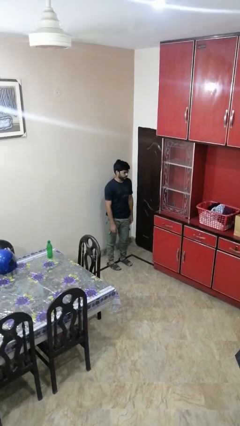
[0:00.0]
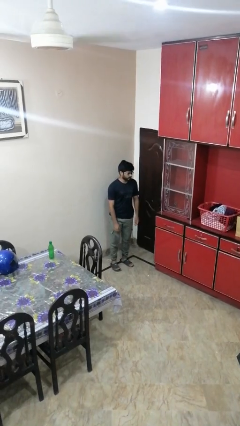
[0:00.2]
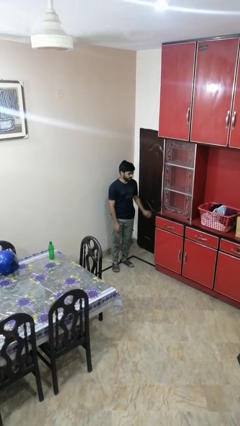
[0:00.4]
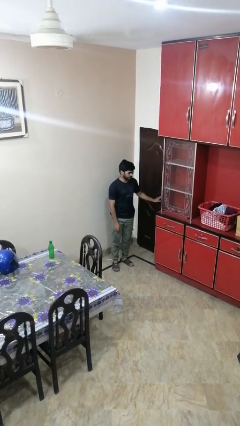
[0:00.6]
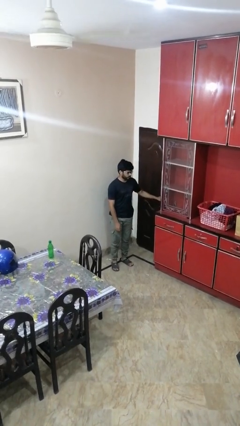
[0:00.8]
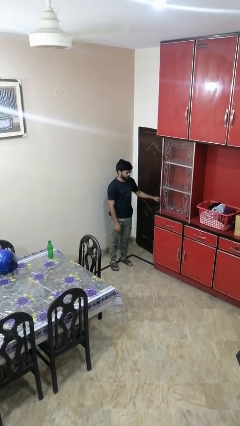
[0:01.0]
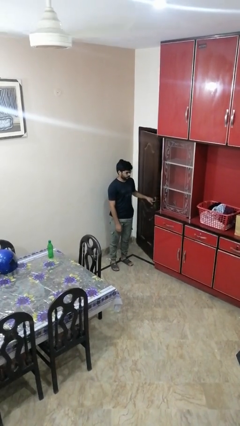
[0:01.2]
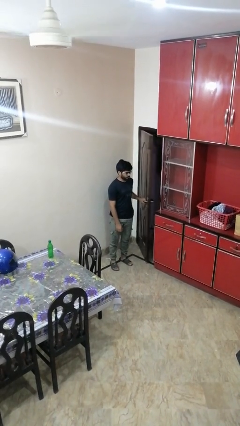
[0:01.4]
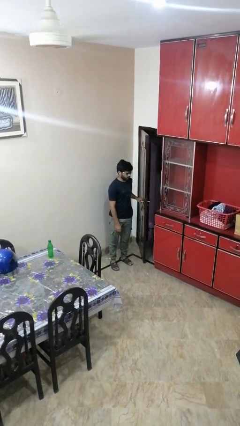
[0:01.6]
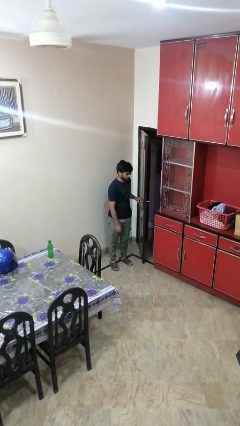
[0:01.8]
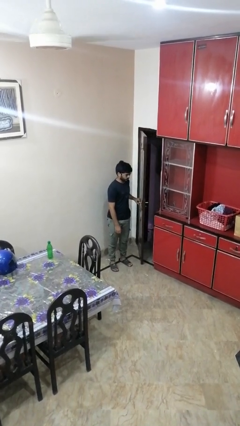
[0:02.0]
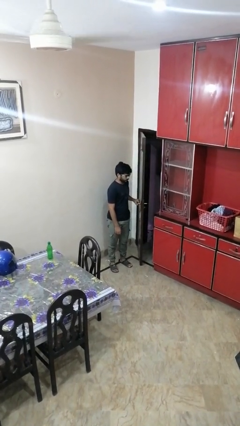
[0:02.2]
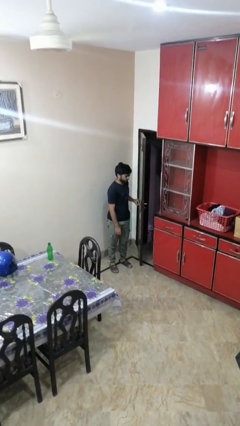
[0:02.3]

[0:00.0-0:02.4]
person opens facility door

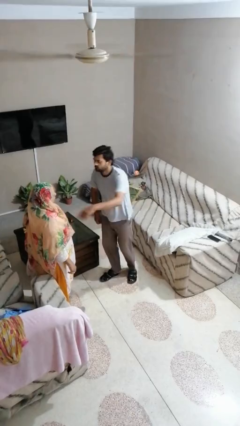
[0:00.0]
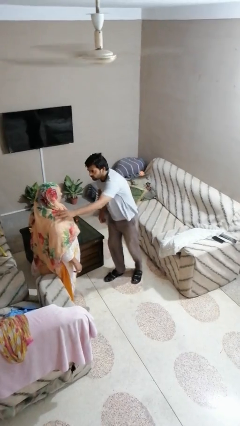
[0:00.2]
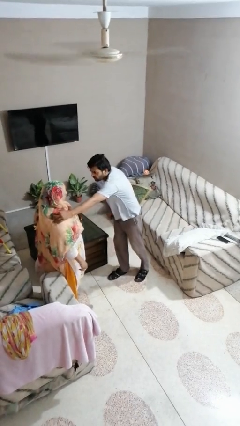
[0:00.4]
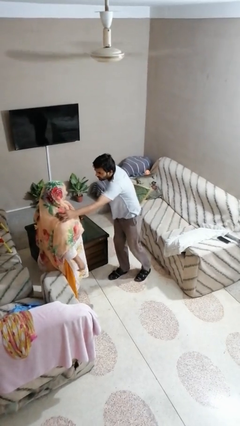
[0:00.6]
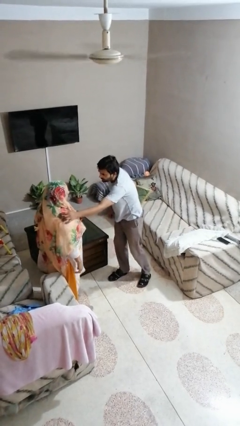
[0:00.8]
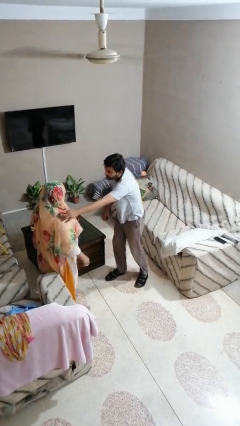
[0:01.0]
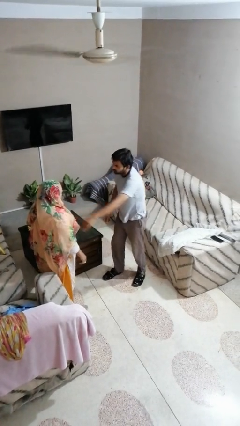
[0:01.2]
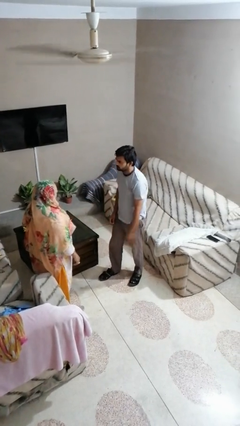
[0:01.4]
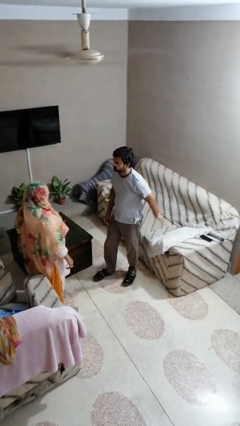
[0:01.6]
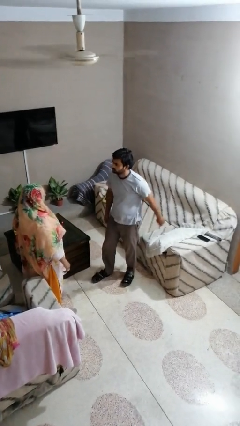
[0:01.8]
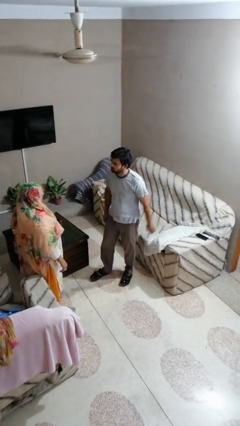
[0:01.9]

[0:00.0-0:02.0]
person shoves person

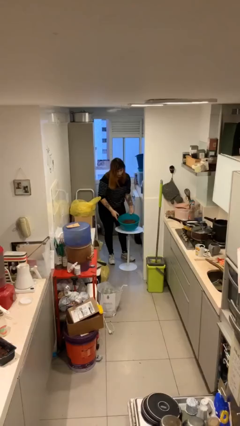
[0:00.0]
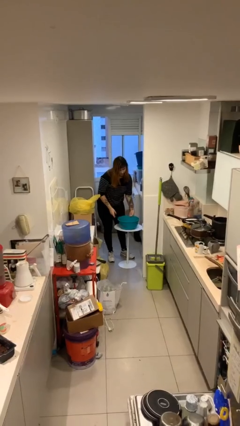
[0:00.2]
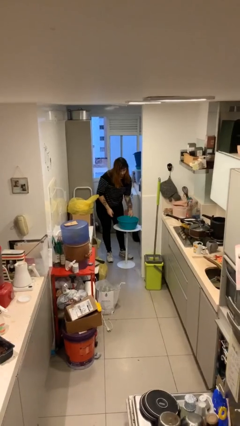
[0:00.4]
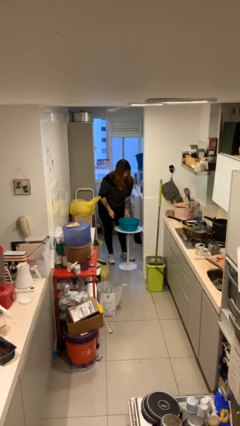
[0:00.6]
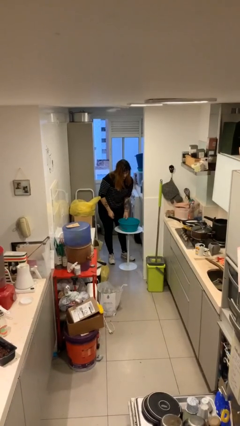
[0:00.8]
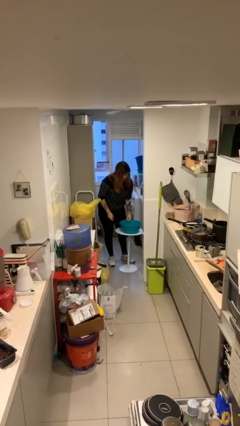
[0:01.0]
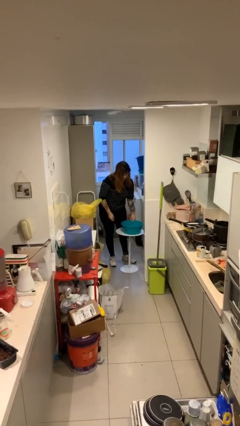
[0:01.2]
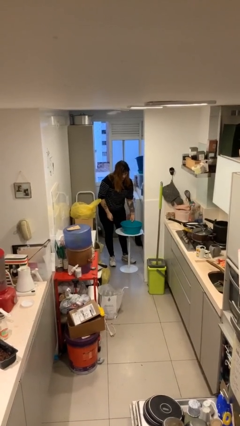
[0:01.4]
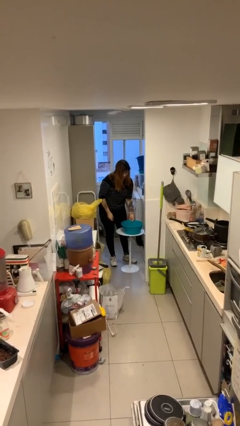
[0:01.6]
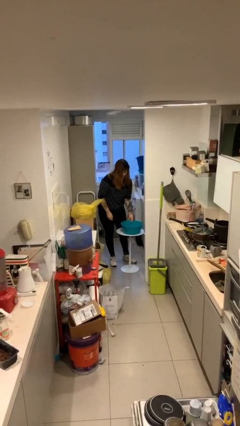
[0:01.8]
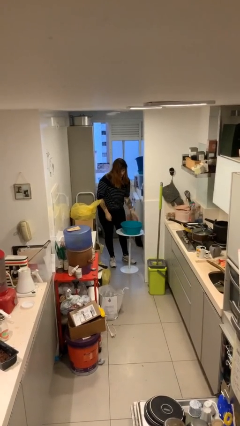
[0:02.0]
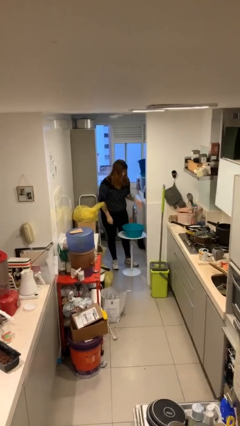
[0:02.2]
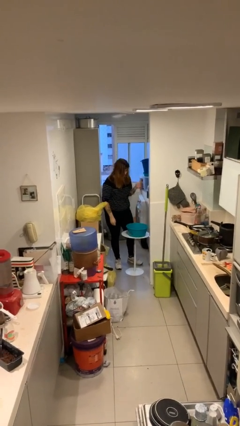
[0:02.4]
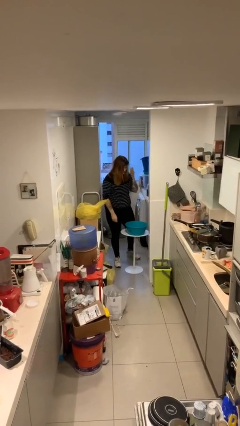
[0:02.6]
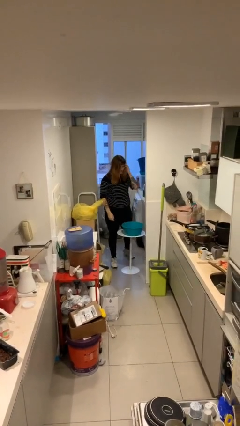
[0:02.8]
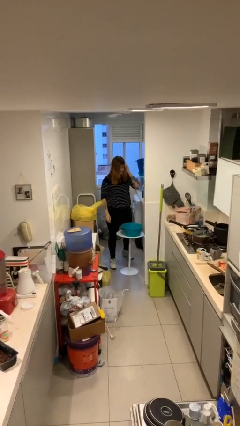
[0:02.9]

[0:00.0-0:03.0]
person puts down object on table

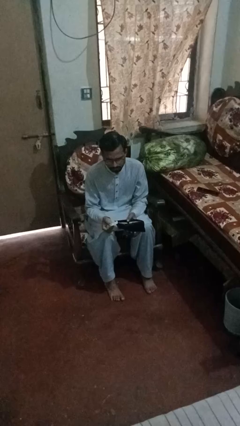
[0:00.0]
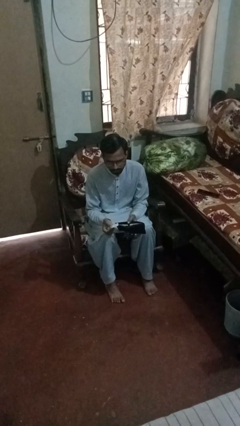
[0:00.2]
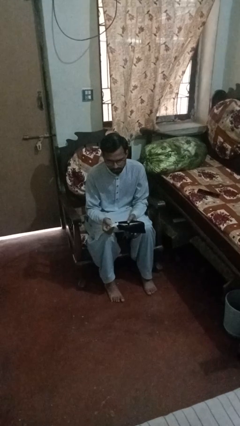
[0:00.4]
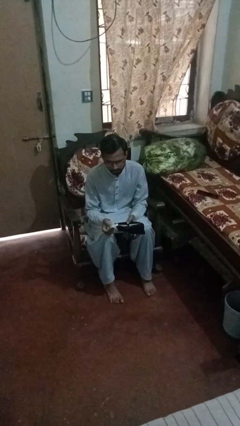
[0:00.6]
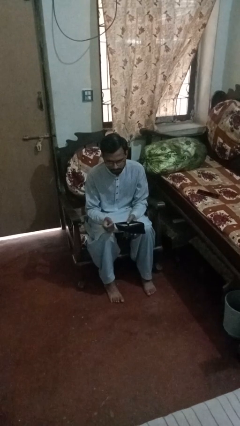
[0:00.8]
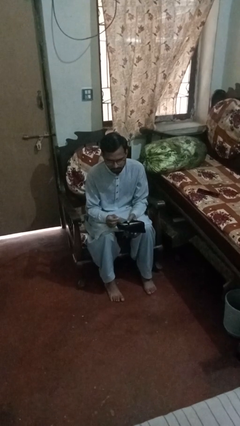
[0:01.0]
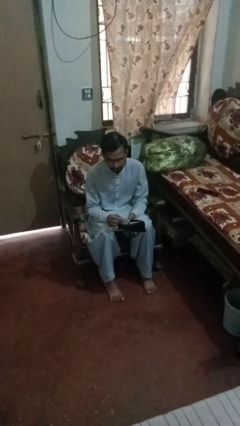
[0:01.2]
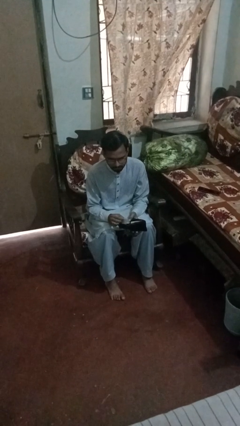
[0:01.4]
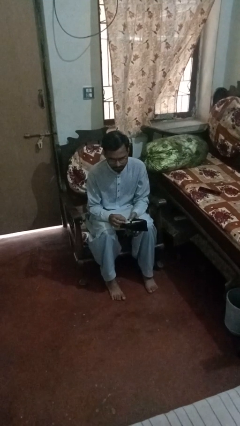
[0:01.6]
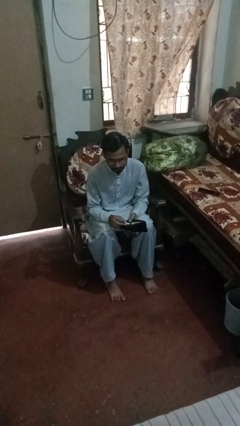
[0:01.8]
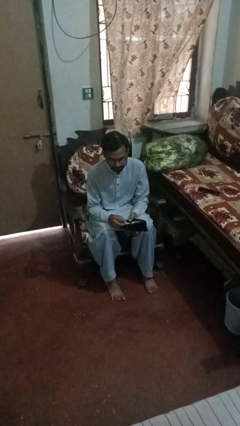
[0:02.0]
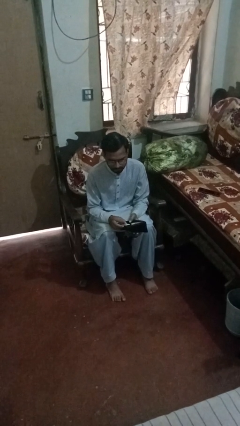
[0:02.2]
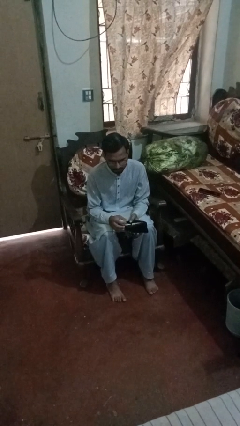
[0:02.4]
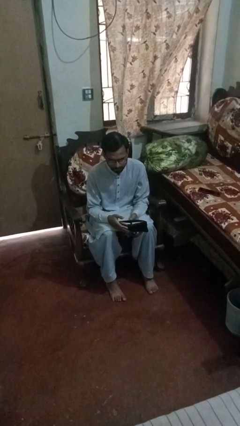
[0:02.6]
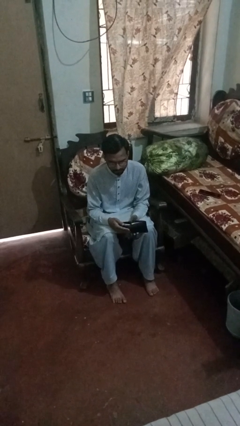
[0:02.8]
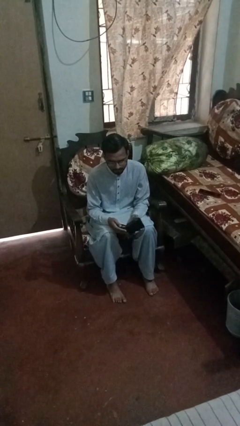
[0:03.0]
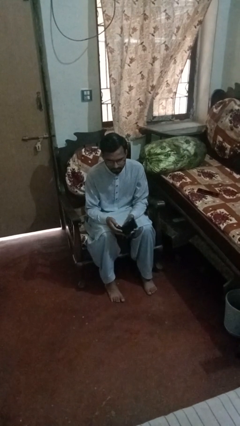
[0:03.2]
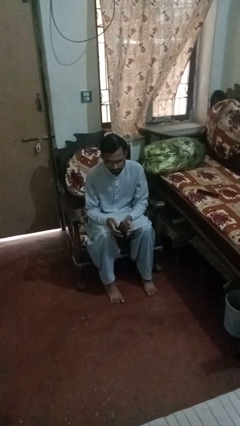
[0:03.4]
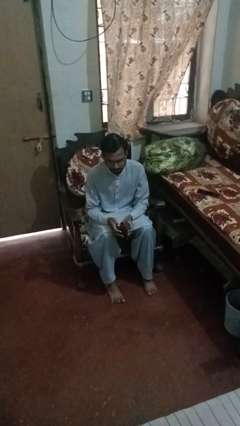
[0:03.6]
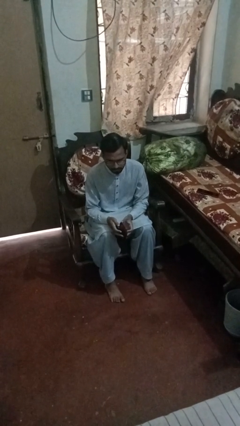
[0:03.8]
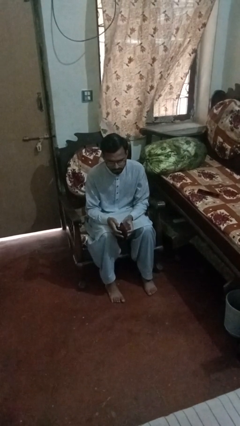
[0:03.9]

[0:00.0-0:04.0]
person puts object into purse

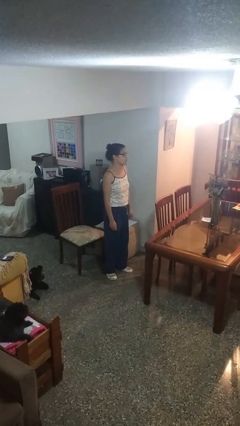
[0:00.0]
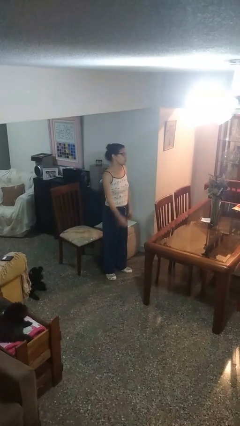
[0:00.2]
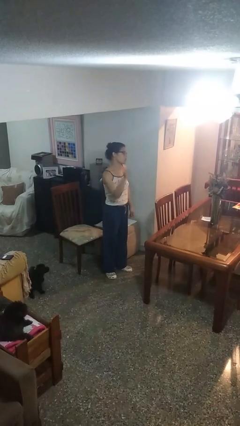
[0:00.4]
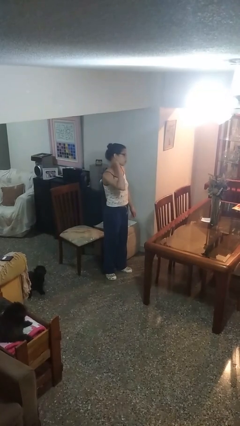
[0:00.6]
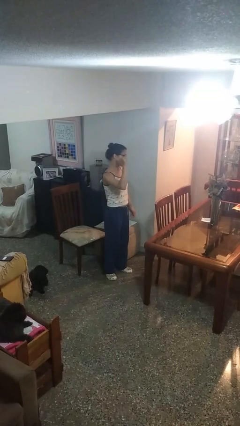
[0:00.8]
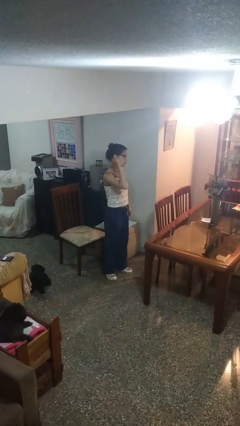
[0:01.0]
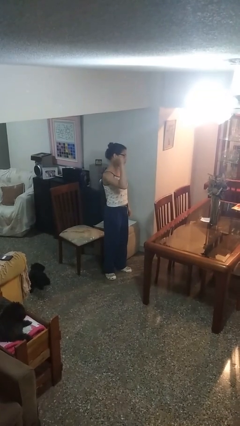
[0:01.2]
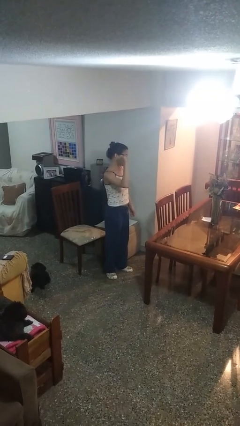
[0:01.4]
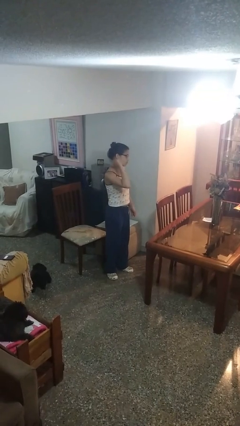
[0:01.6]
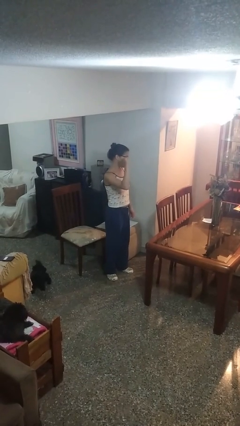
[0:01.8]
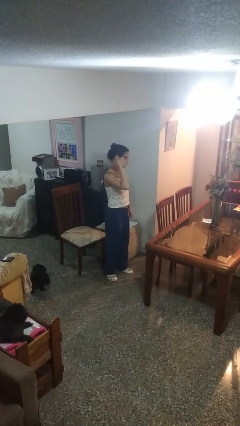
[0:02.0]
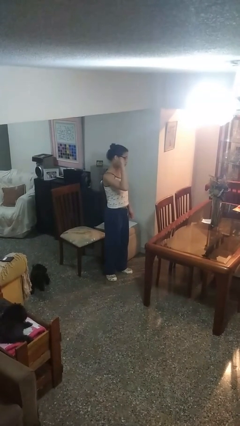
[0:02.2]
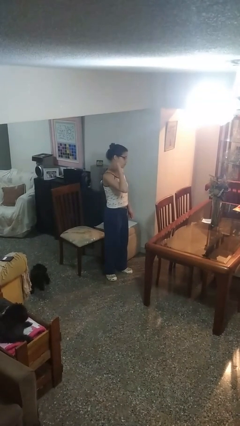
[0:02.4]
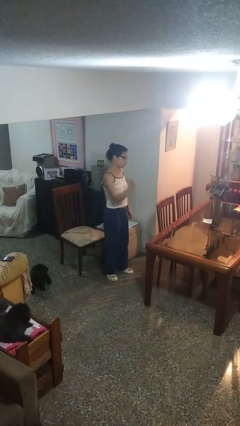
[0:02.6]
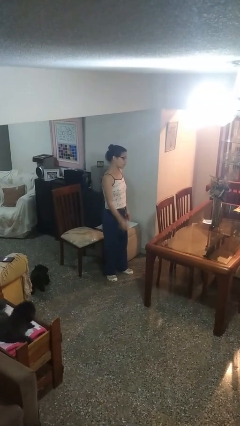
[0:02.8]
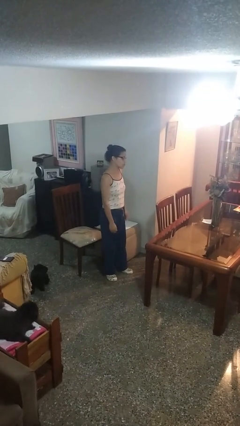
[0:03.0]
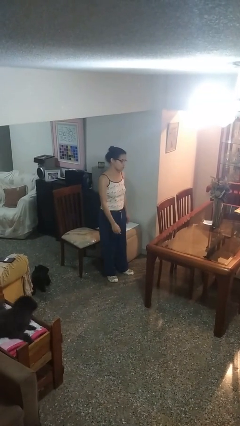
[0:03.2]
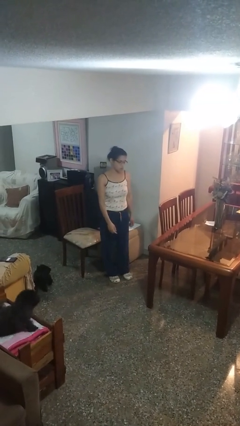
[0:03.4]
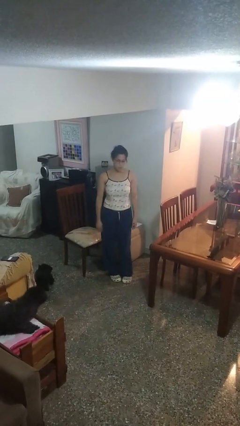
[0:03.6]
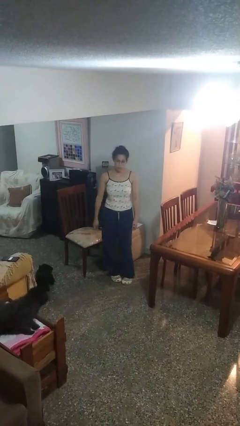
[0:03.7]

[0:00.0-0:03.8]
person gestures behind me

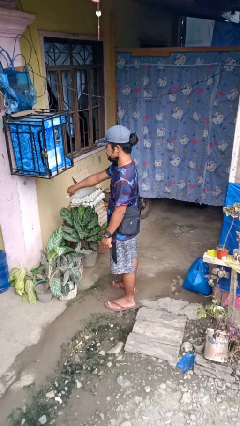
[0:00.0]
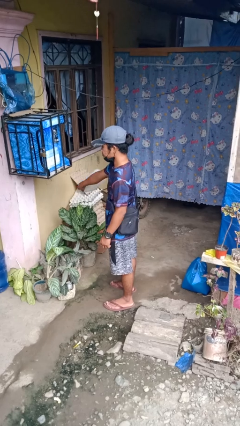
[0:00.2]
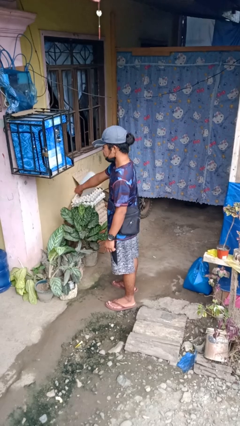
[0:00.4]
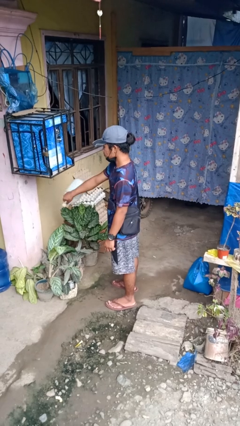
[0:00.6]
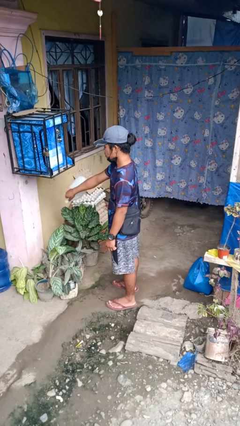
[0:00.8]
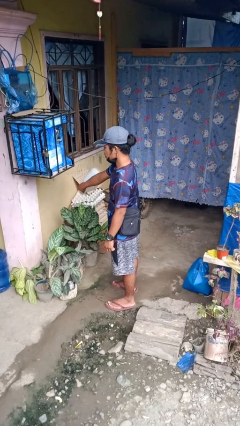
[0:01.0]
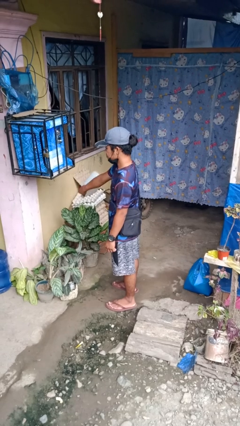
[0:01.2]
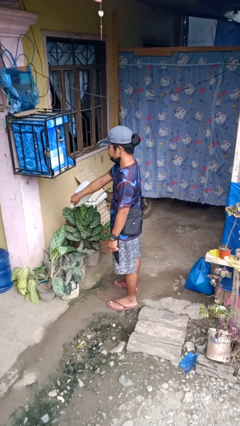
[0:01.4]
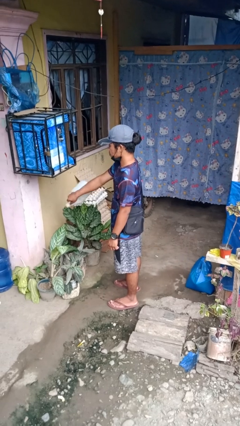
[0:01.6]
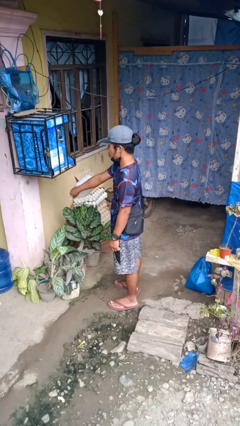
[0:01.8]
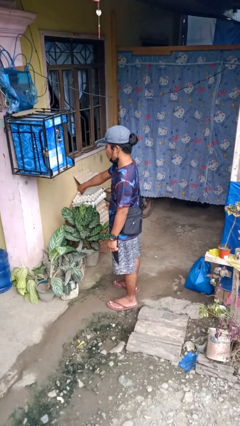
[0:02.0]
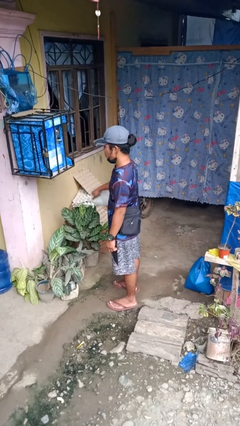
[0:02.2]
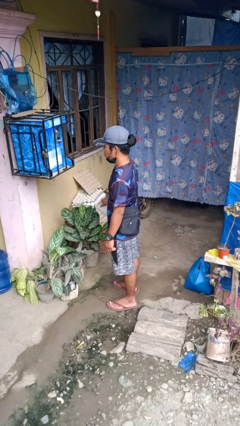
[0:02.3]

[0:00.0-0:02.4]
person waters houseplant
